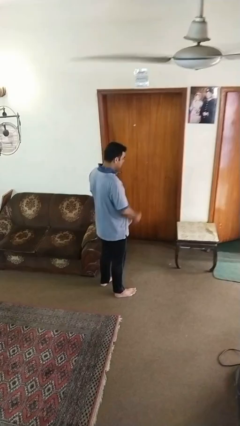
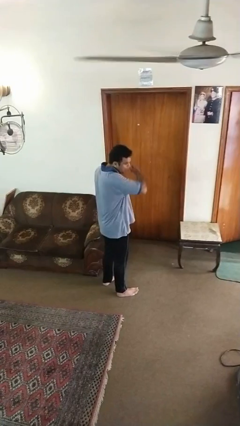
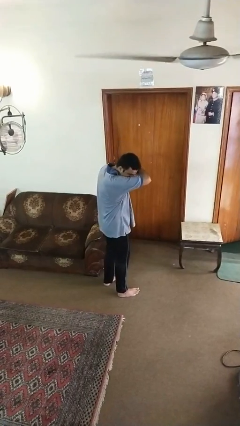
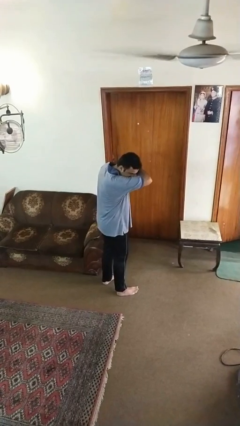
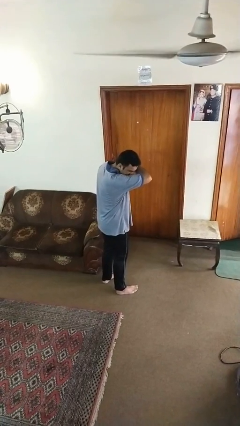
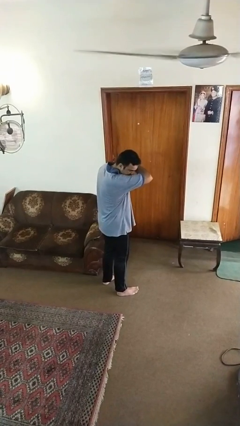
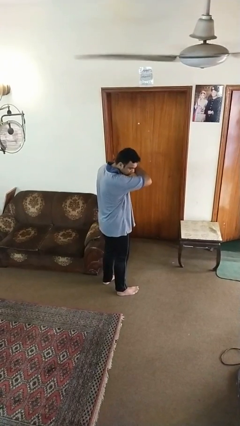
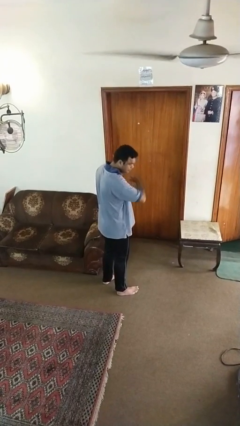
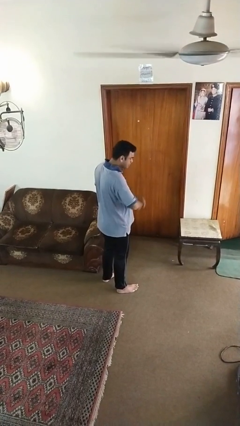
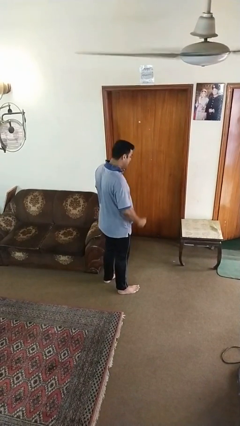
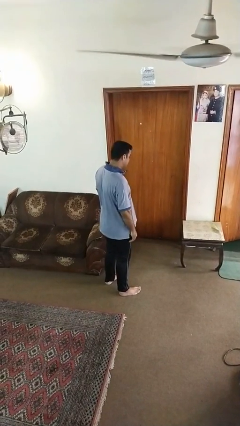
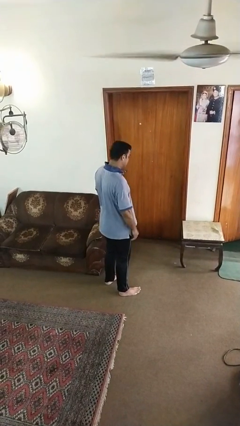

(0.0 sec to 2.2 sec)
person sneezes into arm

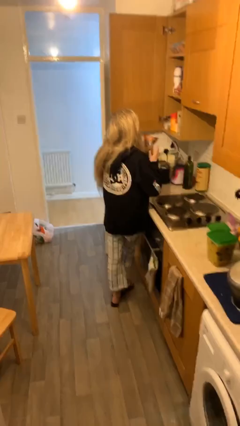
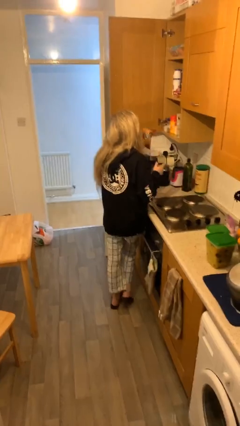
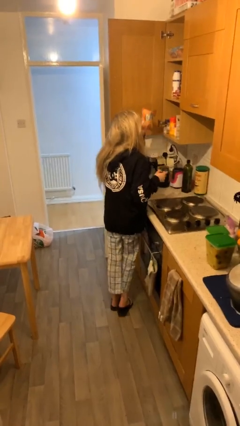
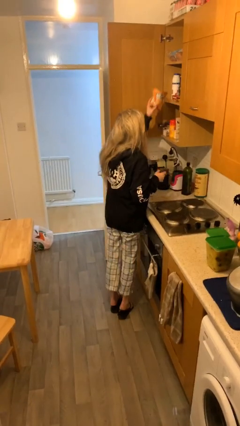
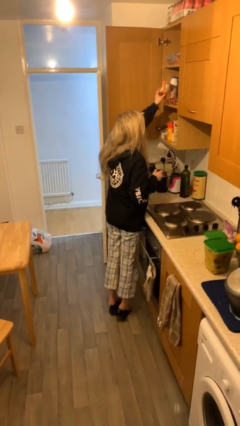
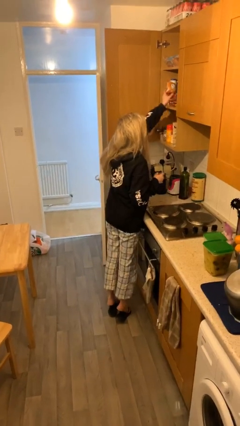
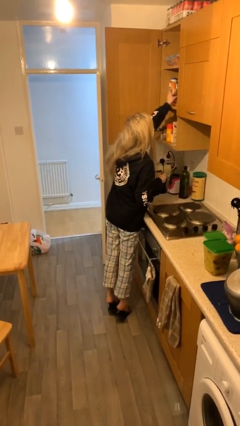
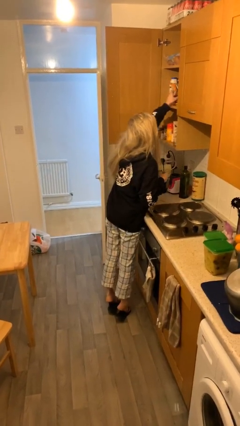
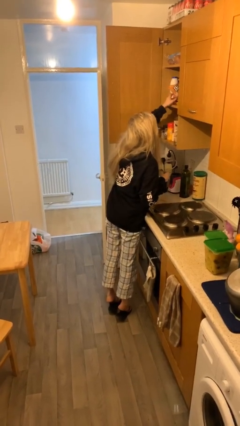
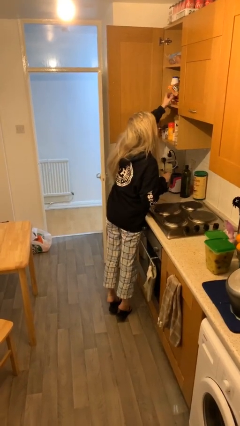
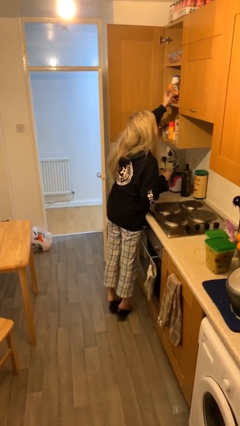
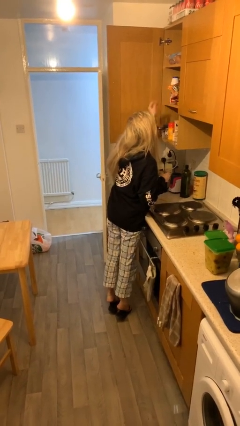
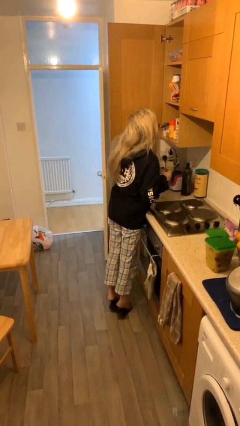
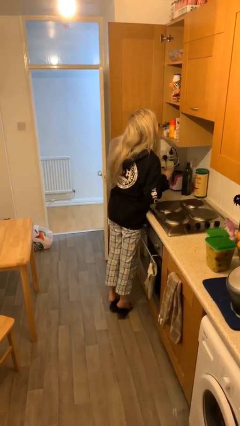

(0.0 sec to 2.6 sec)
person puts down object on shelf

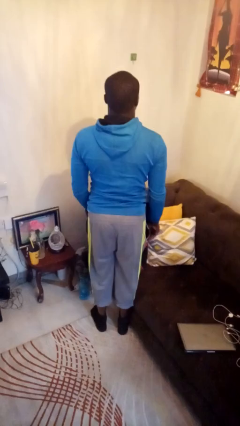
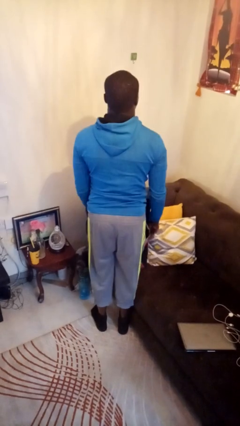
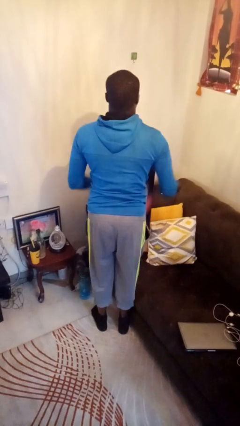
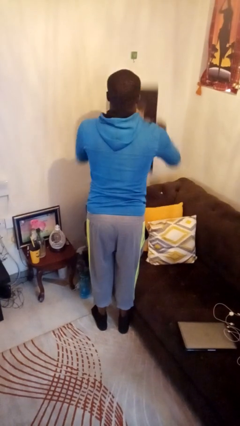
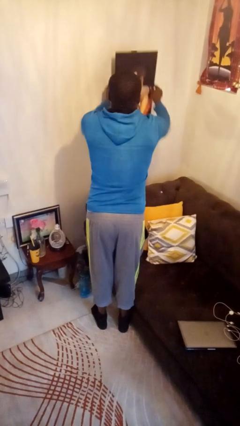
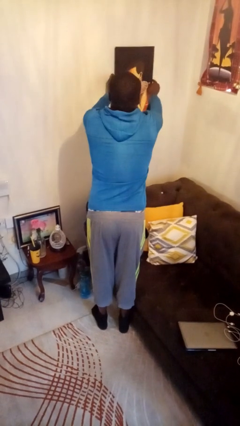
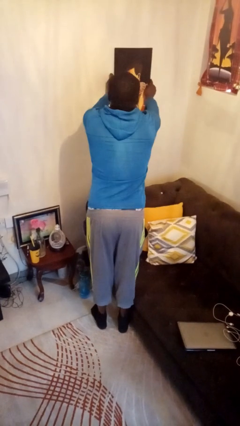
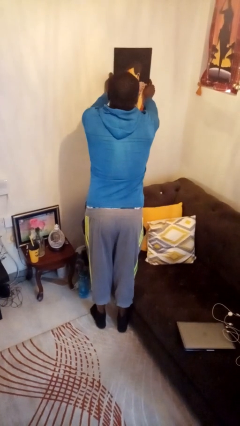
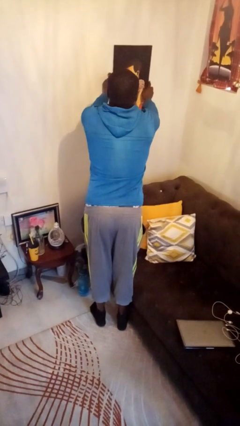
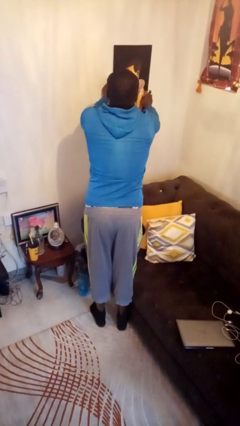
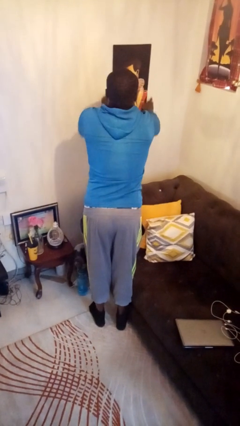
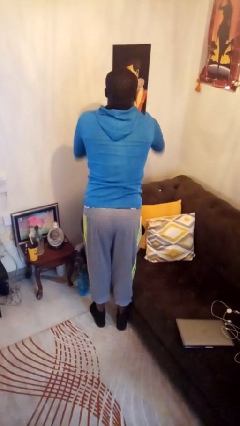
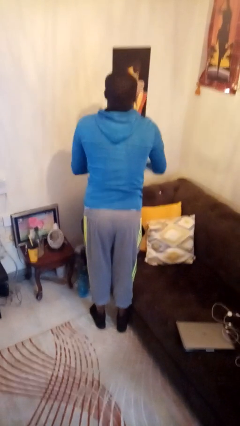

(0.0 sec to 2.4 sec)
person puts up picture frame

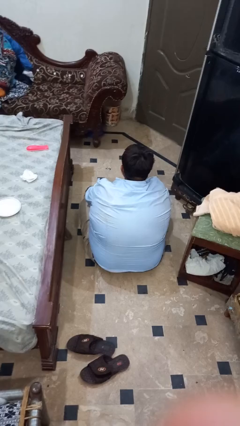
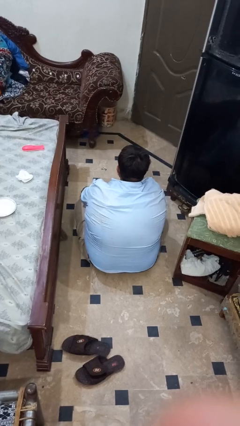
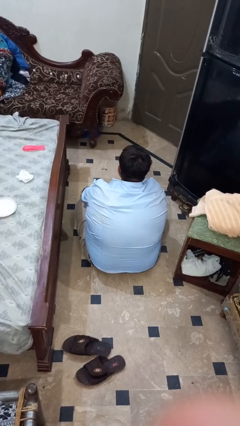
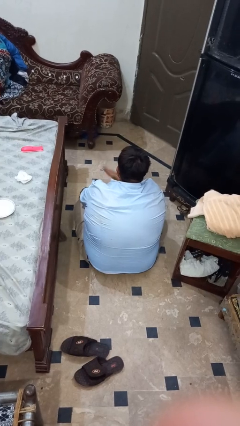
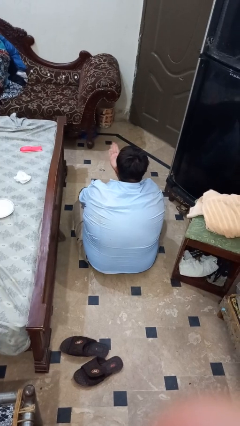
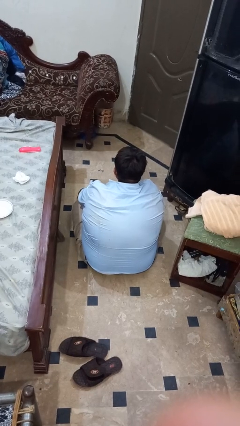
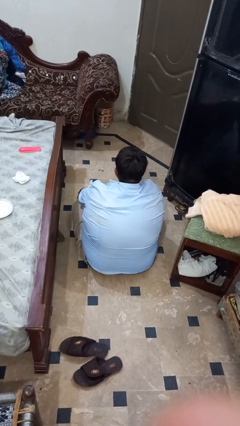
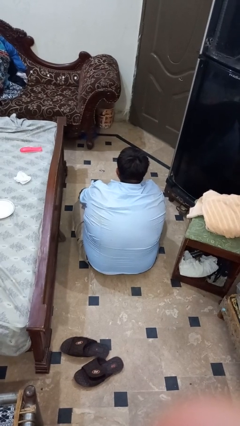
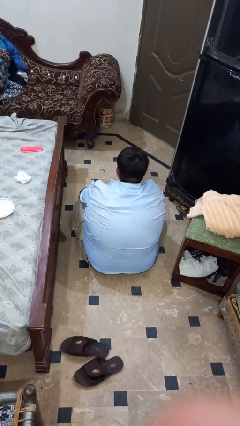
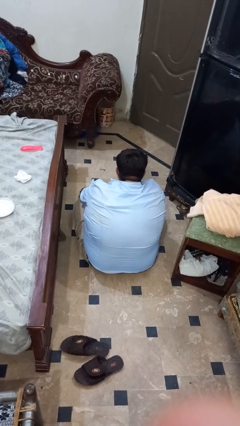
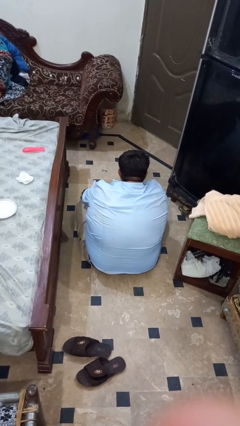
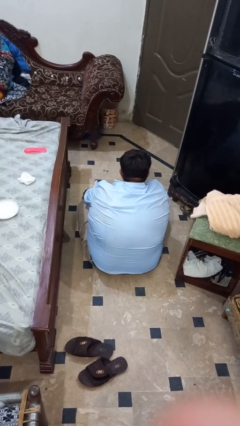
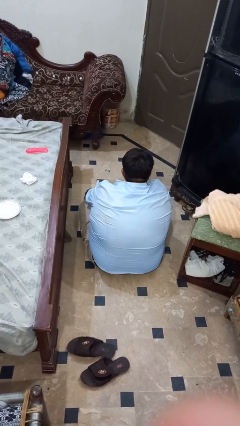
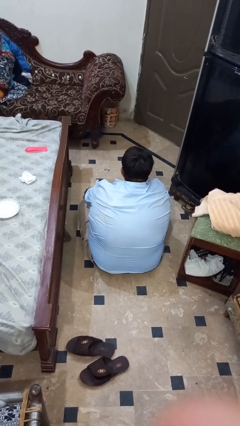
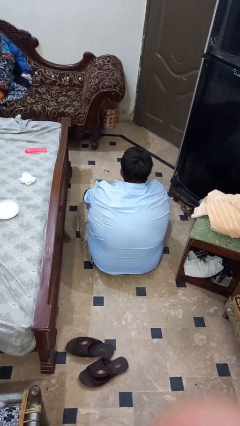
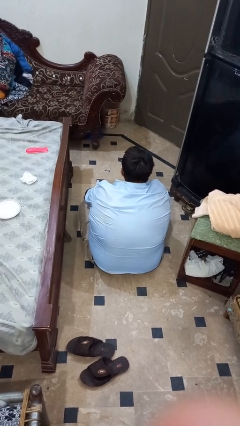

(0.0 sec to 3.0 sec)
person gestures blow kiss

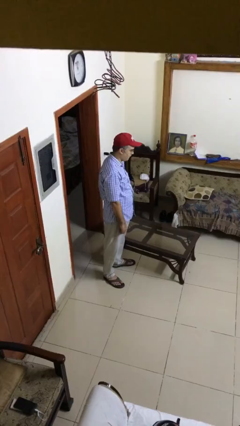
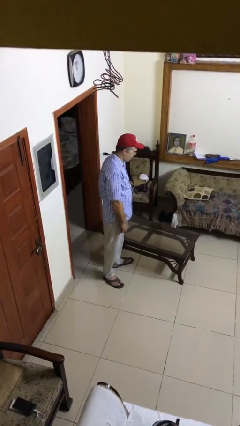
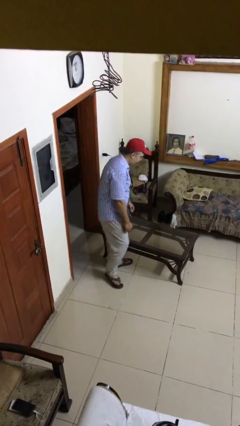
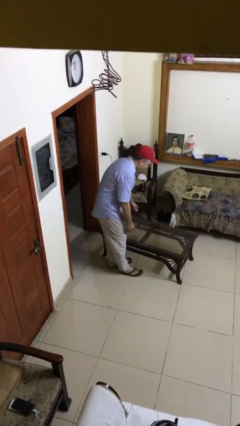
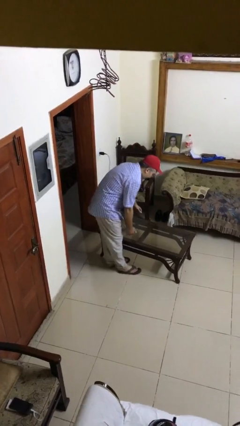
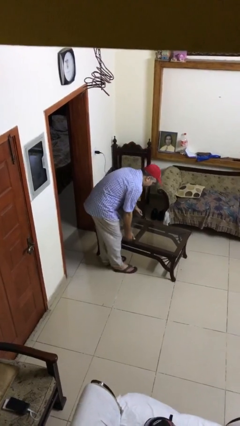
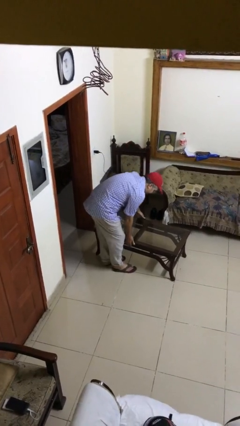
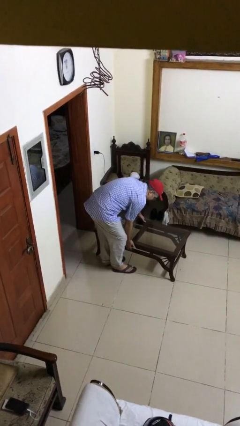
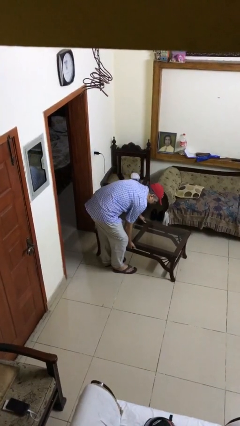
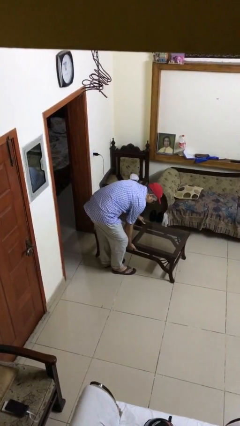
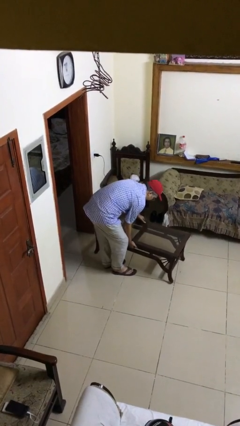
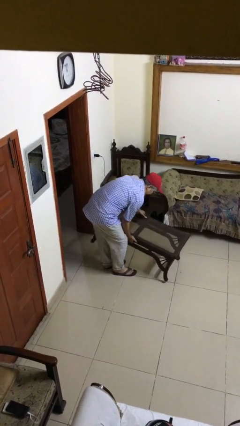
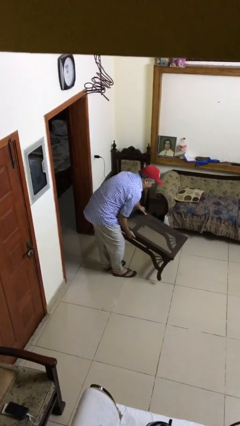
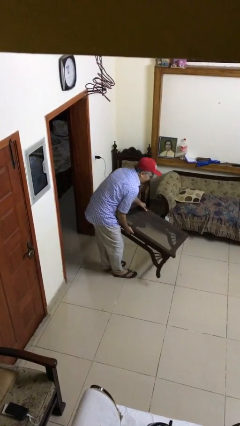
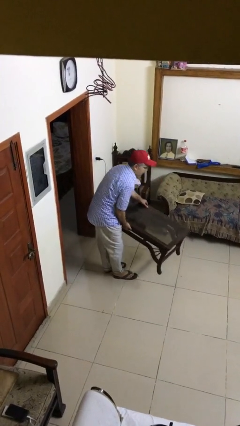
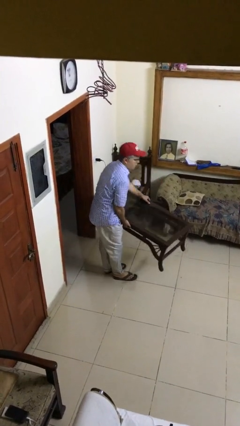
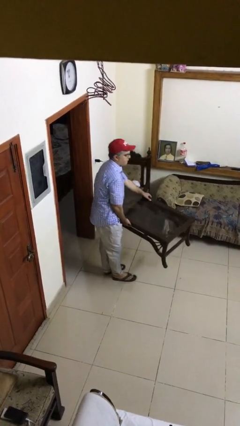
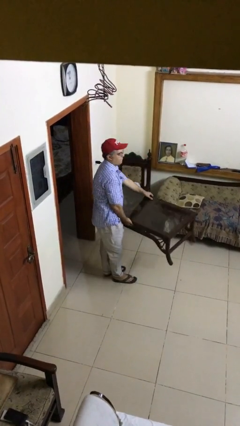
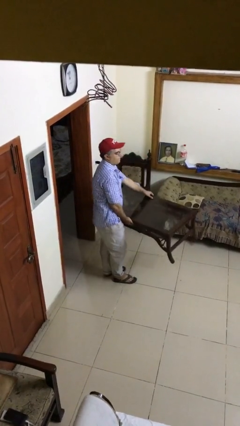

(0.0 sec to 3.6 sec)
person picks up object from floor

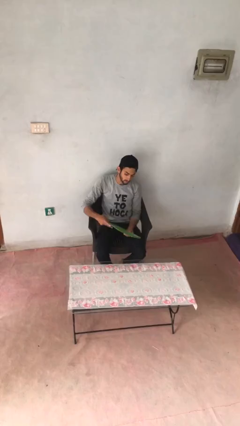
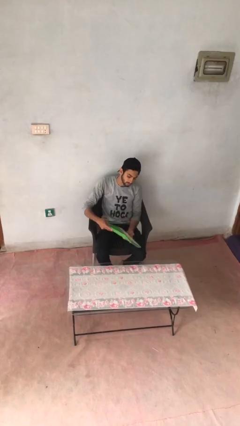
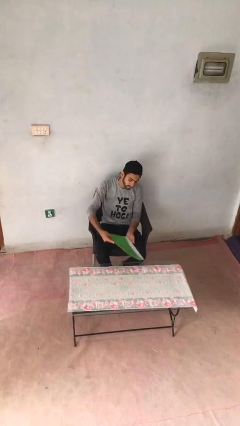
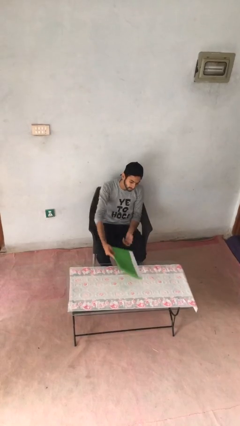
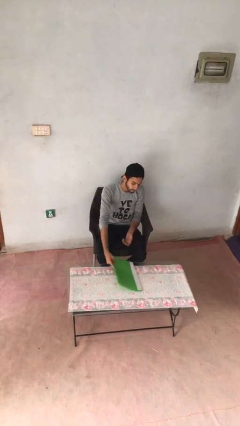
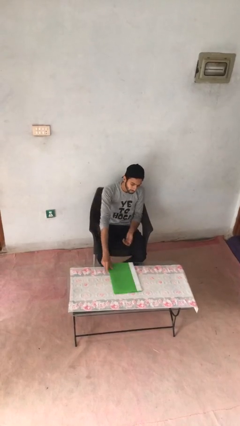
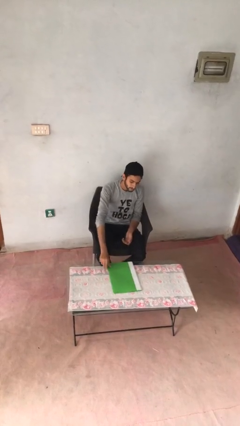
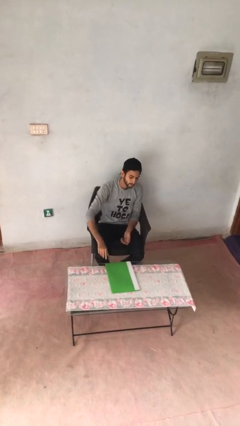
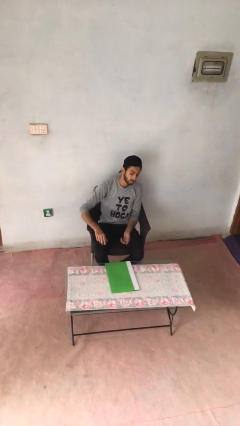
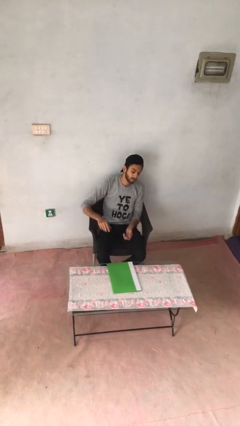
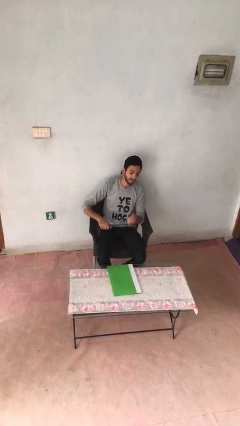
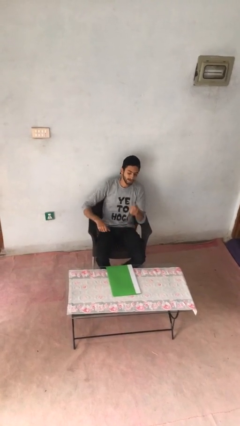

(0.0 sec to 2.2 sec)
person puts down object on table

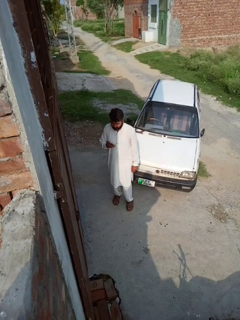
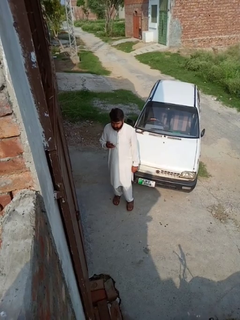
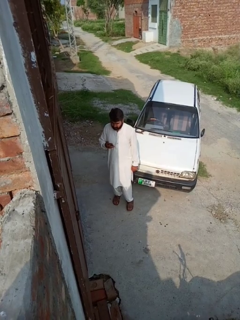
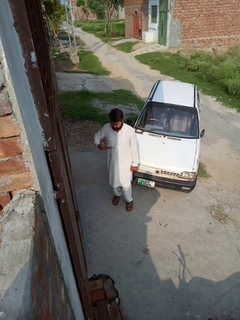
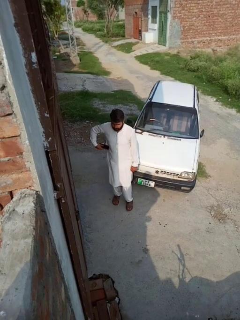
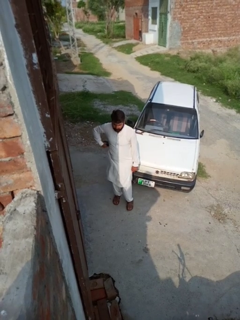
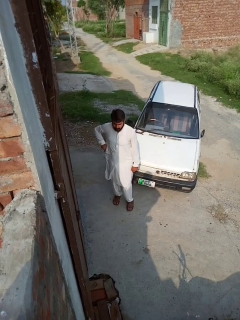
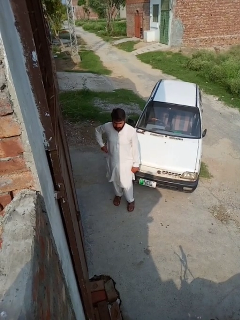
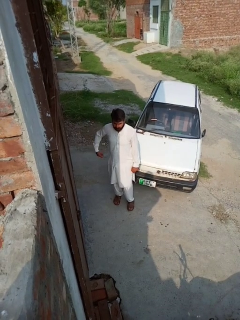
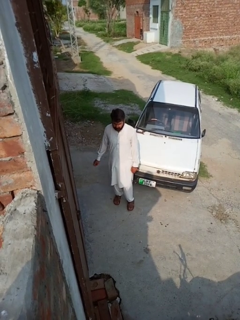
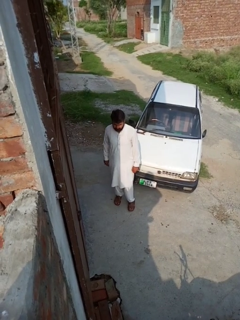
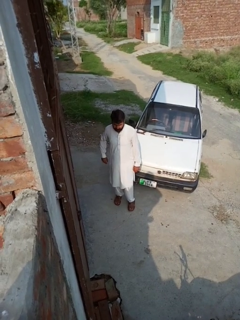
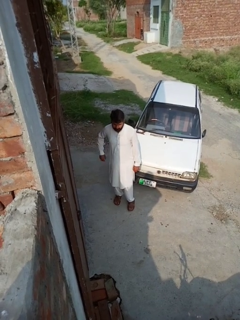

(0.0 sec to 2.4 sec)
person puts phone into pocket
